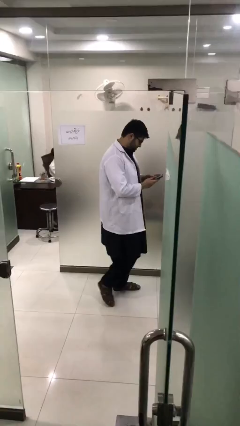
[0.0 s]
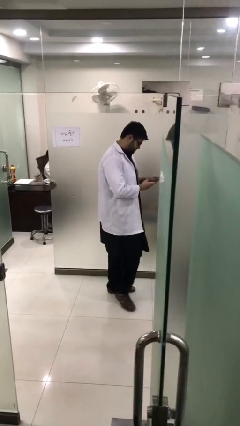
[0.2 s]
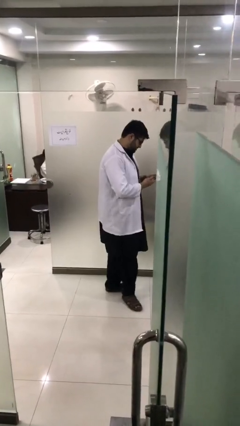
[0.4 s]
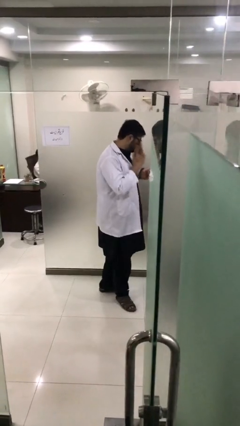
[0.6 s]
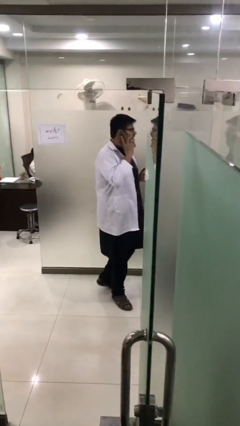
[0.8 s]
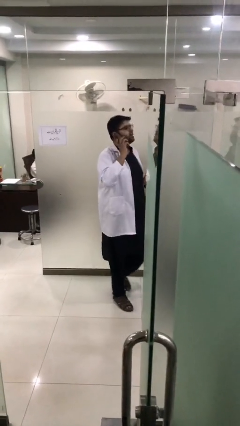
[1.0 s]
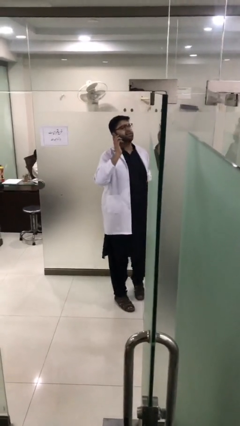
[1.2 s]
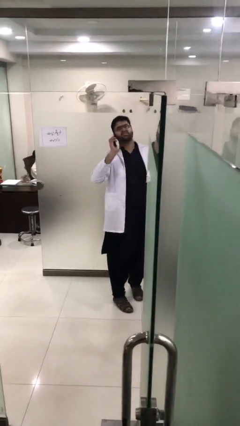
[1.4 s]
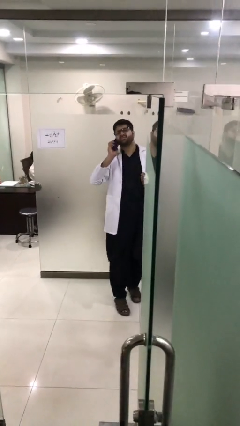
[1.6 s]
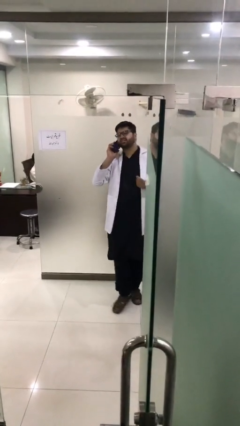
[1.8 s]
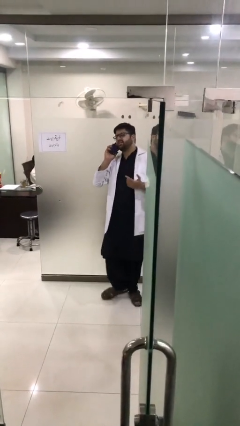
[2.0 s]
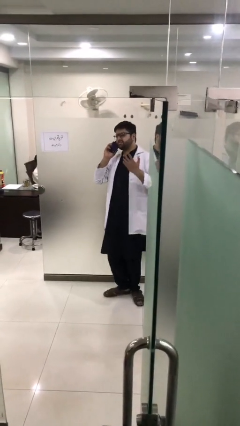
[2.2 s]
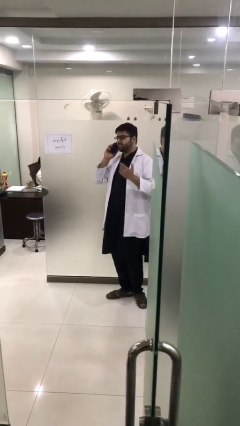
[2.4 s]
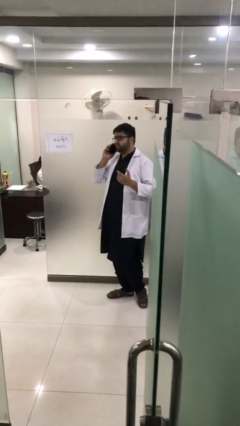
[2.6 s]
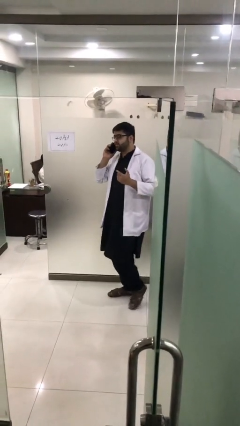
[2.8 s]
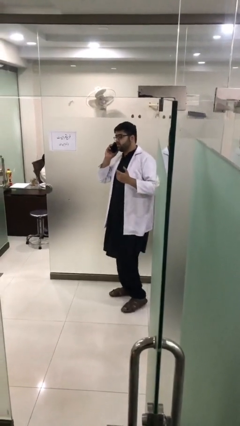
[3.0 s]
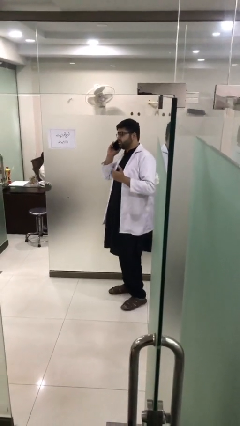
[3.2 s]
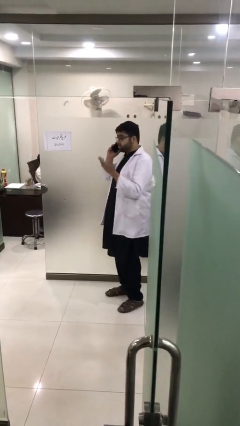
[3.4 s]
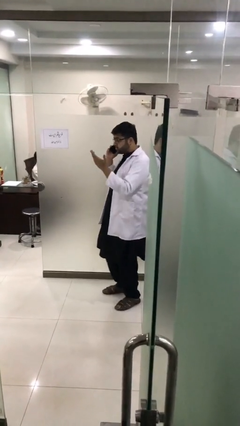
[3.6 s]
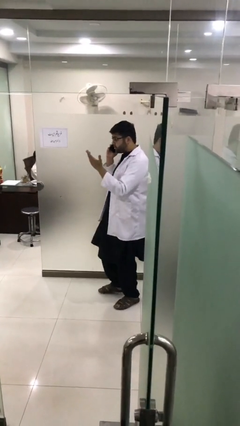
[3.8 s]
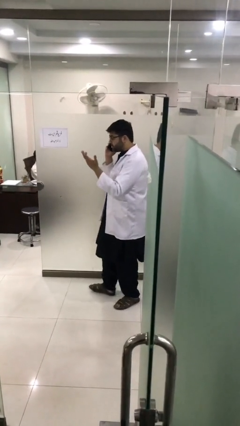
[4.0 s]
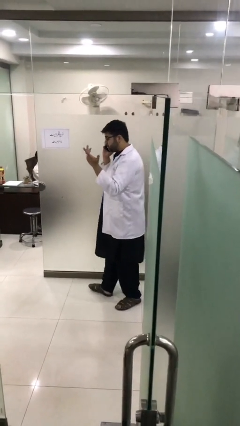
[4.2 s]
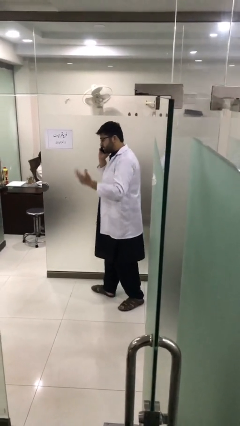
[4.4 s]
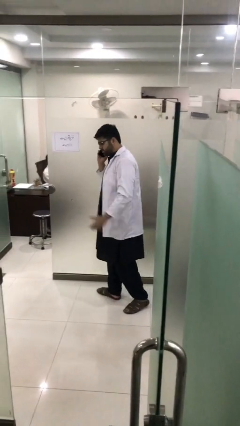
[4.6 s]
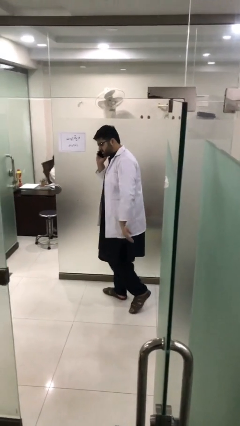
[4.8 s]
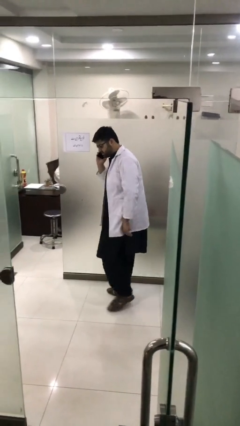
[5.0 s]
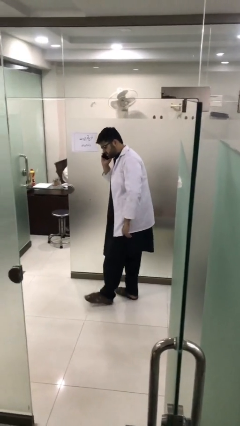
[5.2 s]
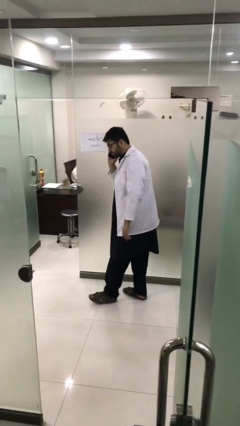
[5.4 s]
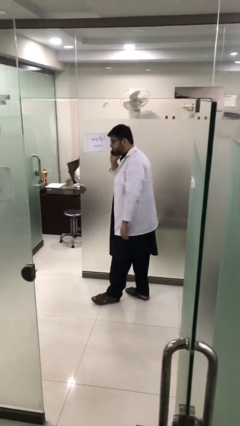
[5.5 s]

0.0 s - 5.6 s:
person talks on phone

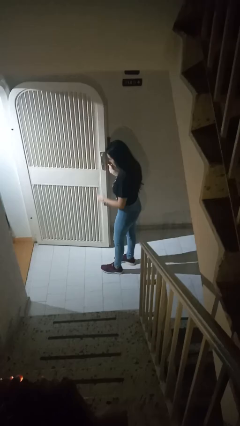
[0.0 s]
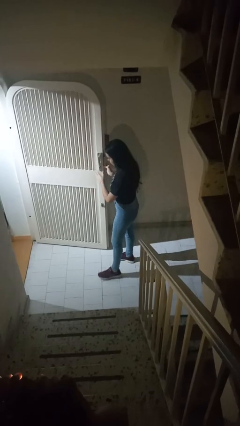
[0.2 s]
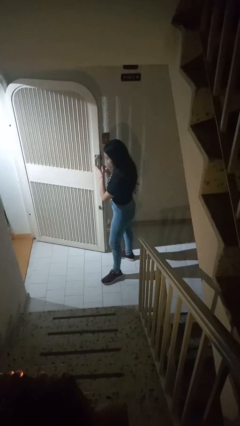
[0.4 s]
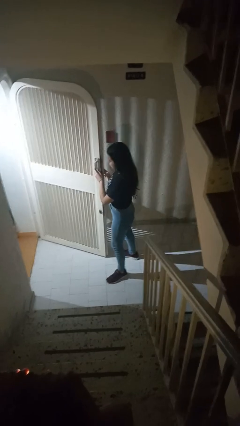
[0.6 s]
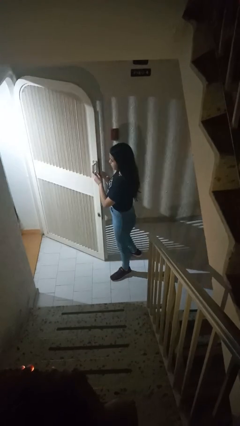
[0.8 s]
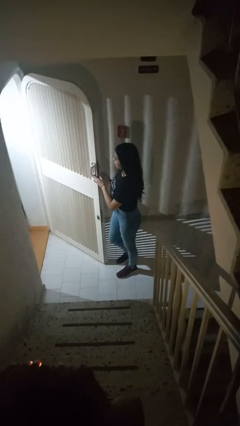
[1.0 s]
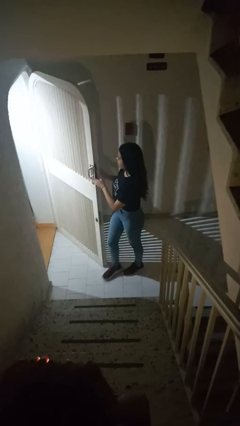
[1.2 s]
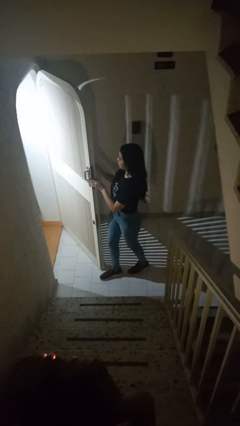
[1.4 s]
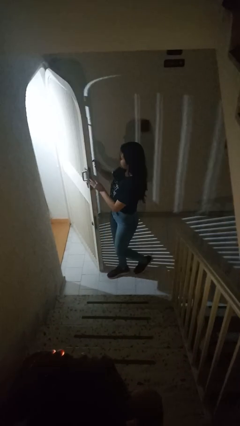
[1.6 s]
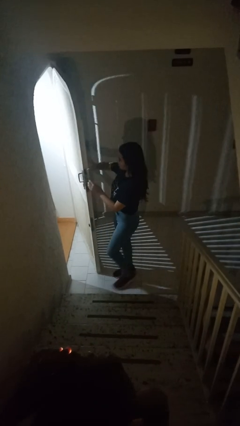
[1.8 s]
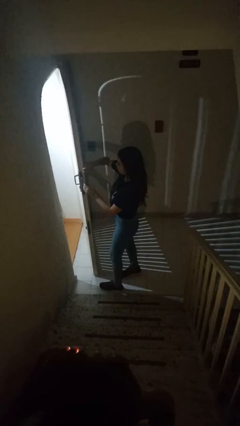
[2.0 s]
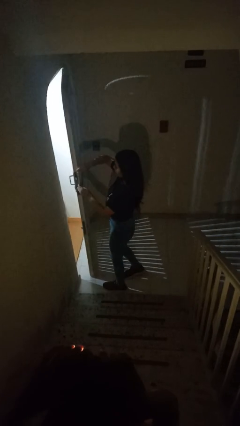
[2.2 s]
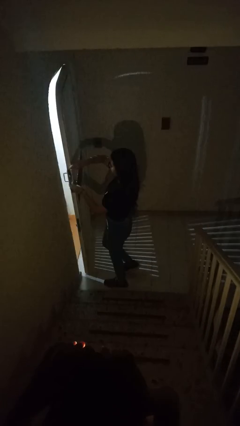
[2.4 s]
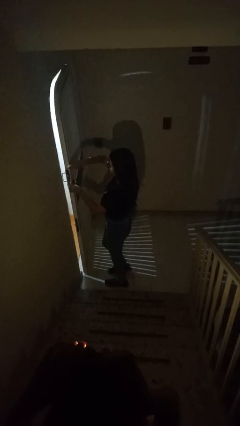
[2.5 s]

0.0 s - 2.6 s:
person closes facility door

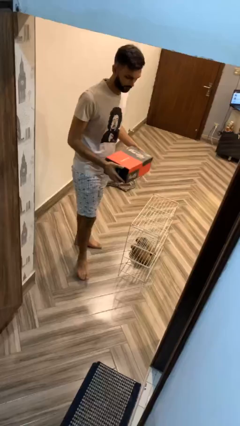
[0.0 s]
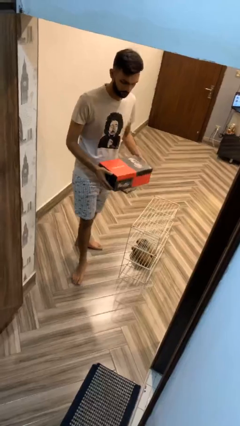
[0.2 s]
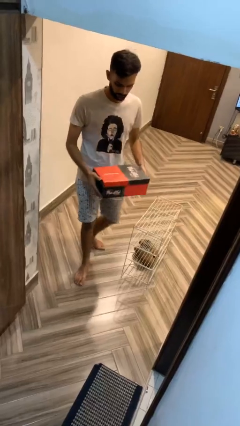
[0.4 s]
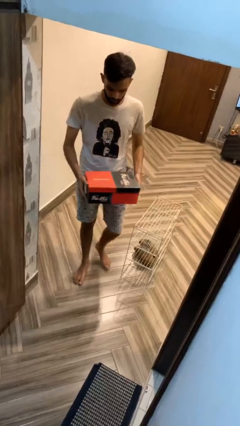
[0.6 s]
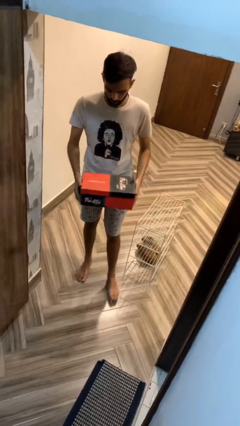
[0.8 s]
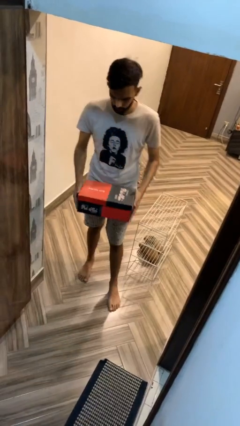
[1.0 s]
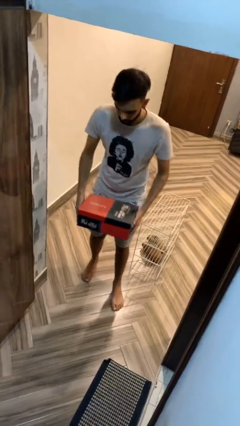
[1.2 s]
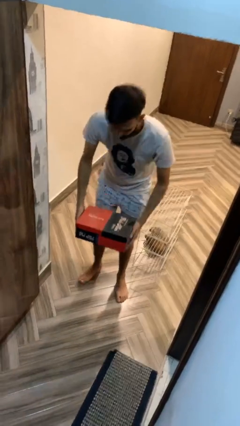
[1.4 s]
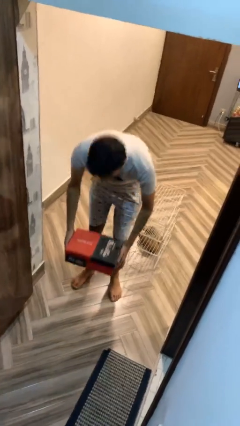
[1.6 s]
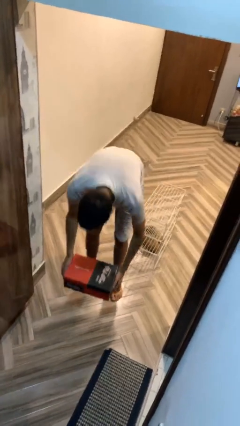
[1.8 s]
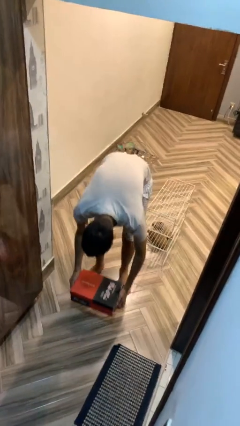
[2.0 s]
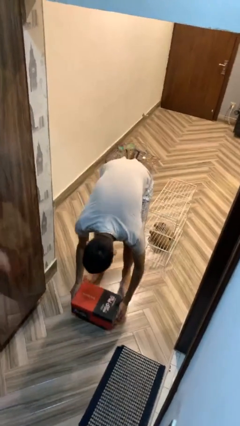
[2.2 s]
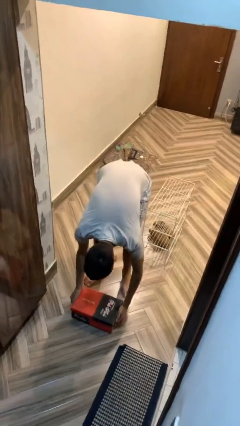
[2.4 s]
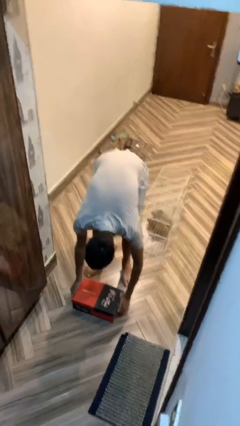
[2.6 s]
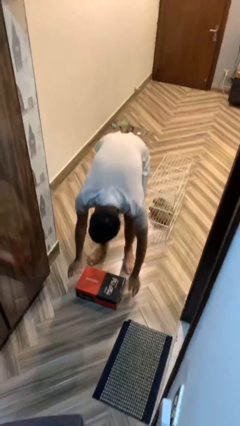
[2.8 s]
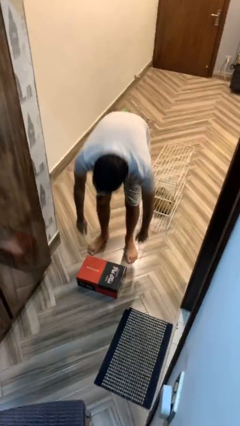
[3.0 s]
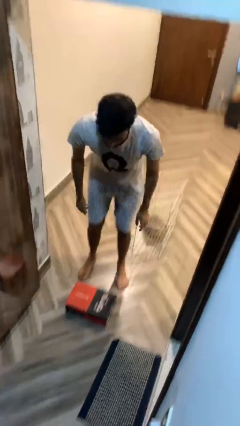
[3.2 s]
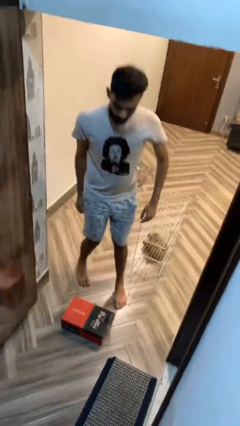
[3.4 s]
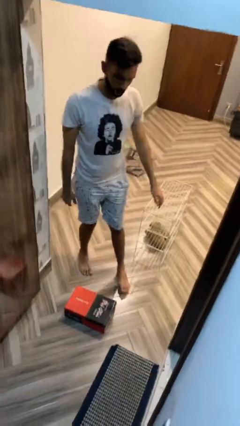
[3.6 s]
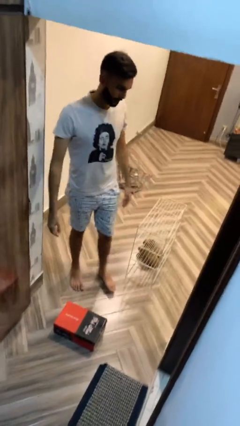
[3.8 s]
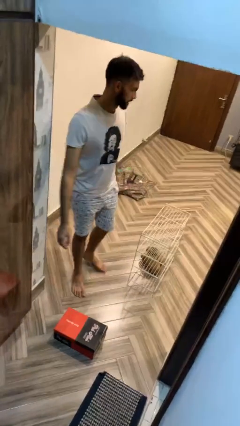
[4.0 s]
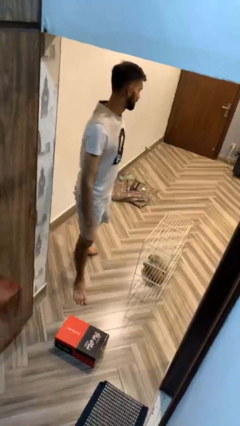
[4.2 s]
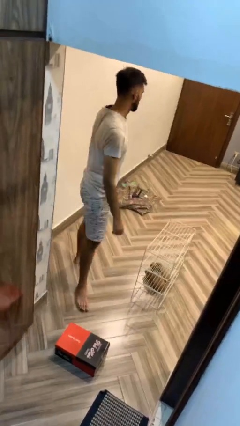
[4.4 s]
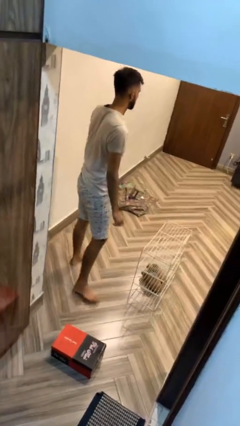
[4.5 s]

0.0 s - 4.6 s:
person puts down object on floor

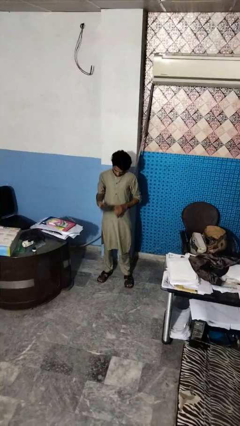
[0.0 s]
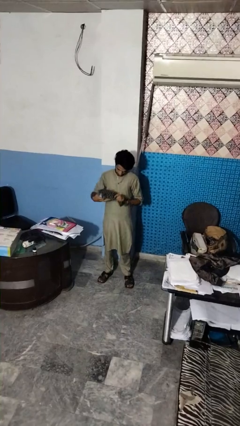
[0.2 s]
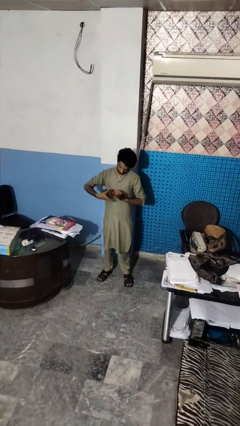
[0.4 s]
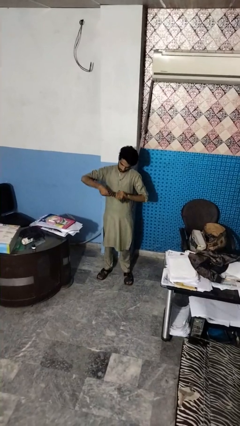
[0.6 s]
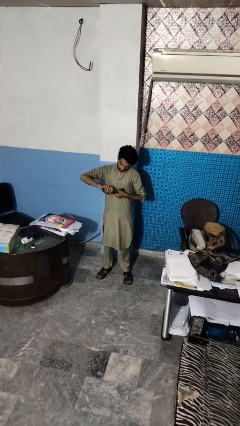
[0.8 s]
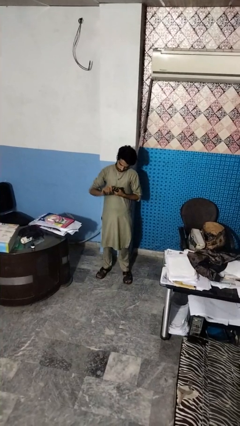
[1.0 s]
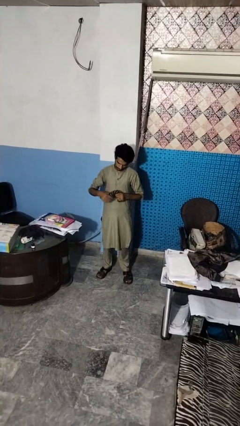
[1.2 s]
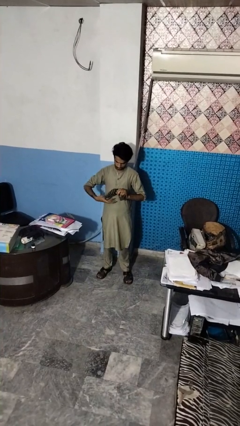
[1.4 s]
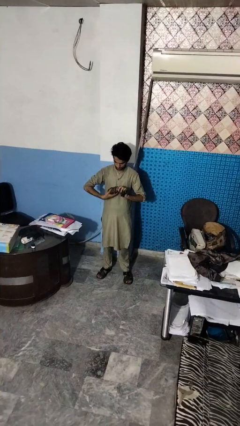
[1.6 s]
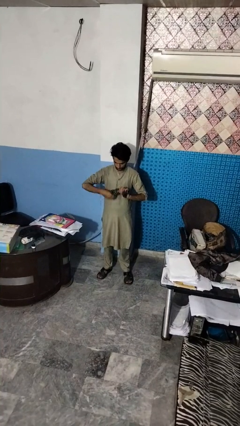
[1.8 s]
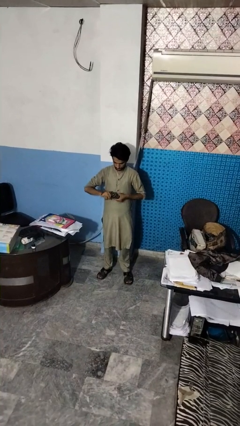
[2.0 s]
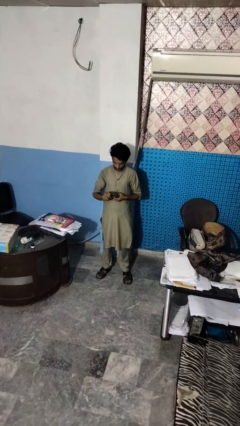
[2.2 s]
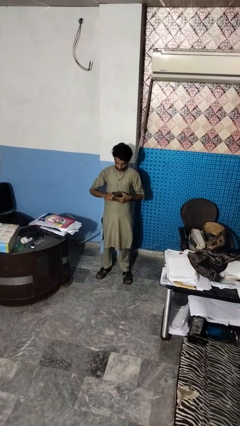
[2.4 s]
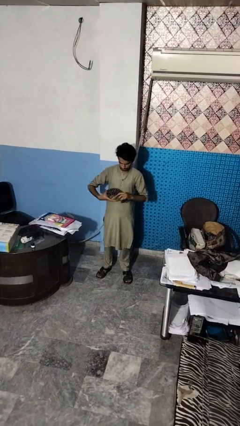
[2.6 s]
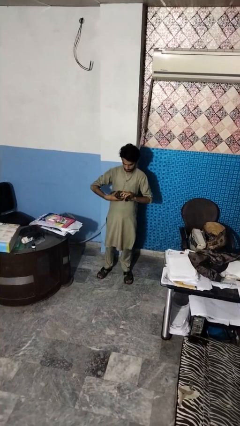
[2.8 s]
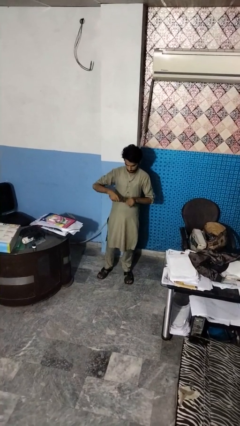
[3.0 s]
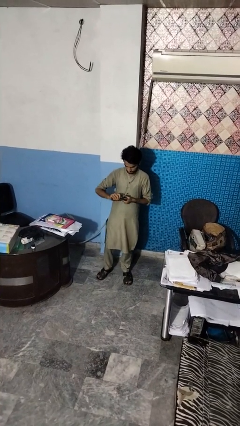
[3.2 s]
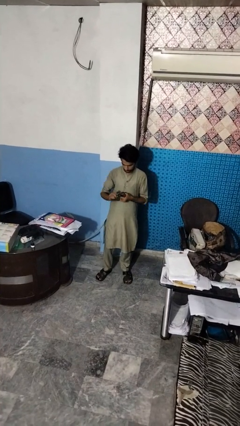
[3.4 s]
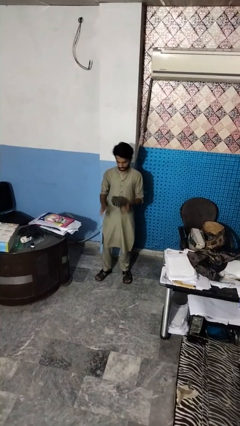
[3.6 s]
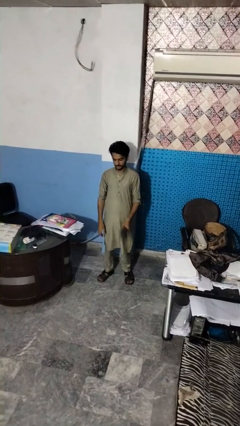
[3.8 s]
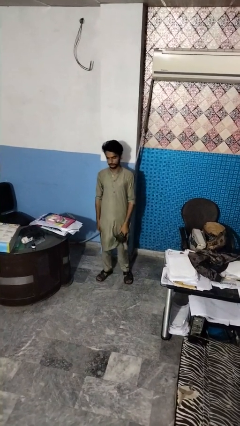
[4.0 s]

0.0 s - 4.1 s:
person squeezes object

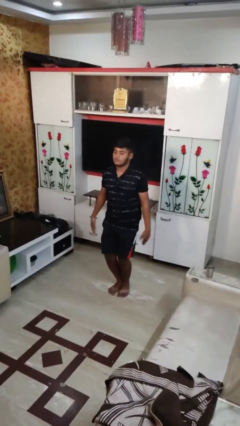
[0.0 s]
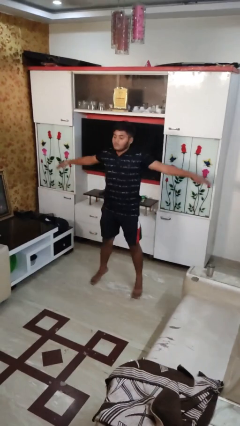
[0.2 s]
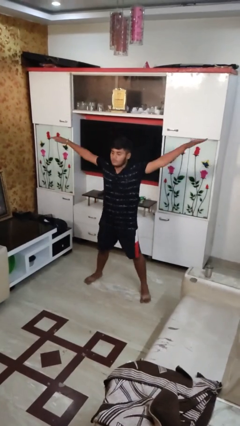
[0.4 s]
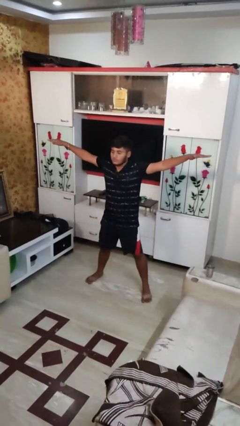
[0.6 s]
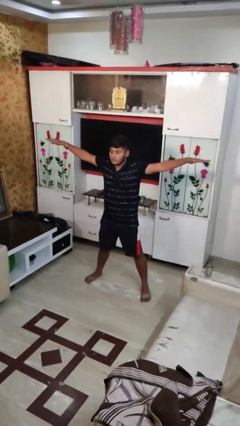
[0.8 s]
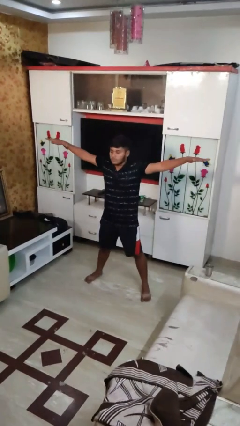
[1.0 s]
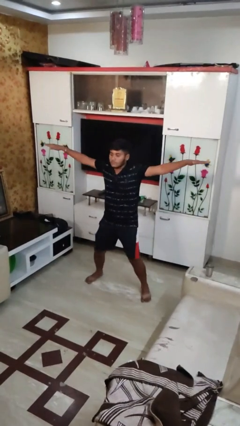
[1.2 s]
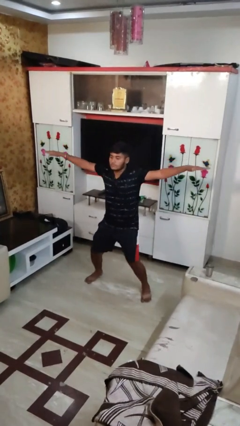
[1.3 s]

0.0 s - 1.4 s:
person exercises with jumping jacks
